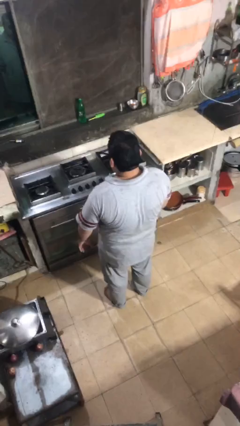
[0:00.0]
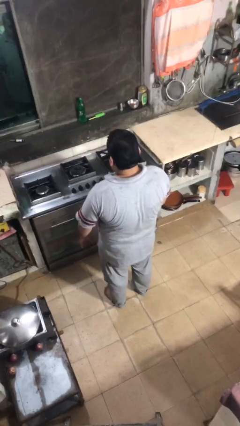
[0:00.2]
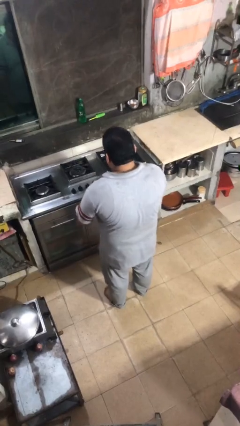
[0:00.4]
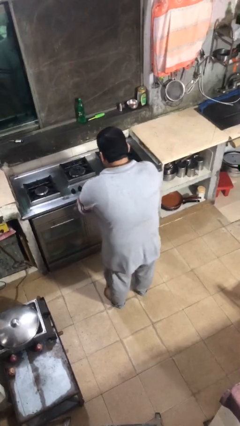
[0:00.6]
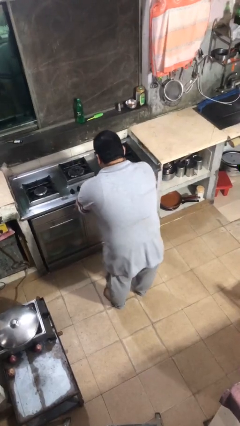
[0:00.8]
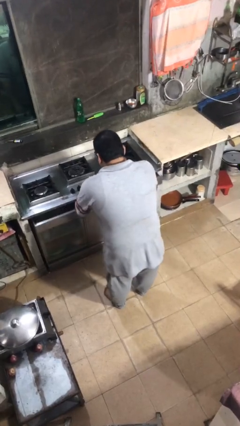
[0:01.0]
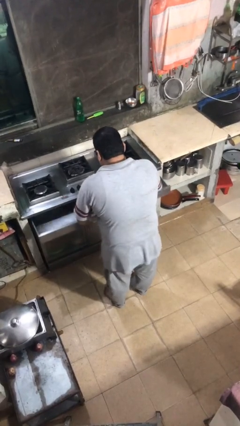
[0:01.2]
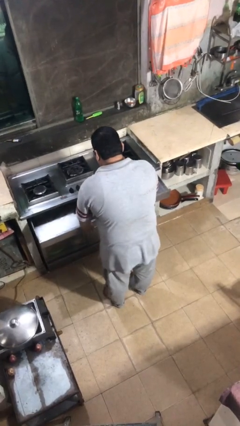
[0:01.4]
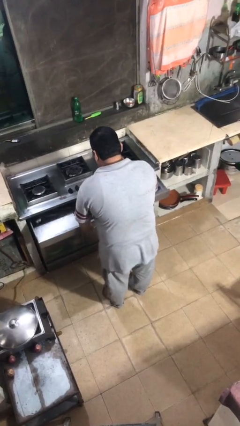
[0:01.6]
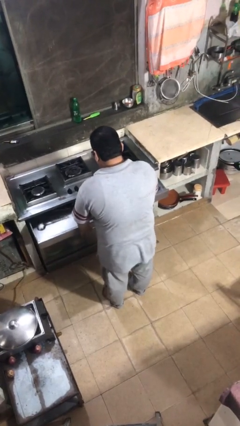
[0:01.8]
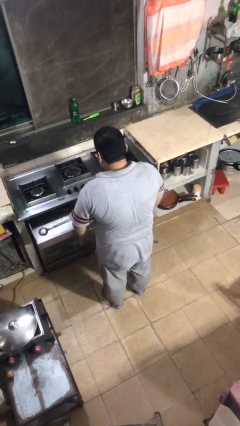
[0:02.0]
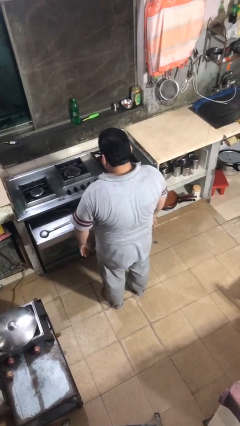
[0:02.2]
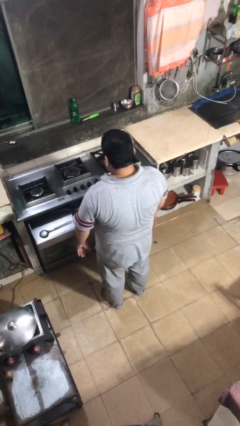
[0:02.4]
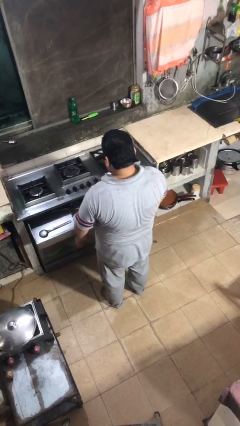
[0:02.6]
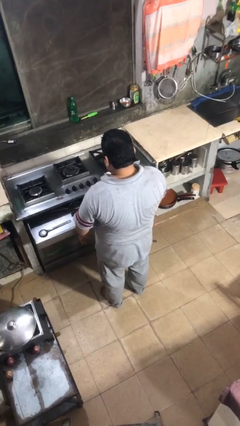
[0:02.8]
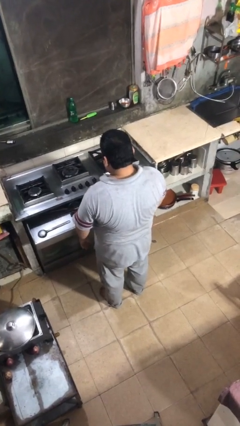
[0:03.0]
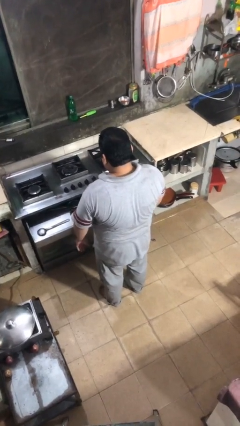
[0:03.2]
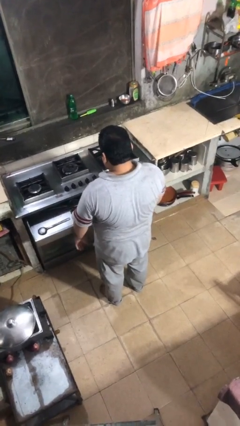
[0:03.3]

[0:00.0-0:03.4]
person opens kitchen drawer

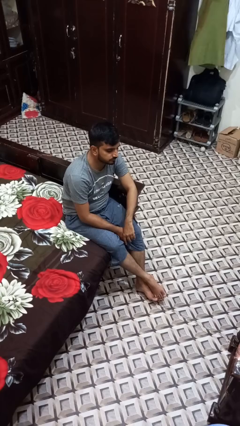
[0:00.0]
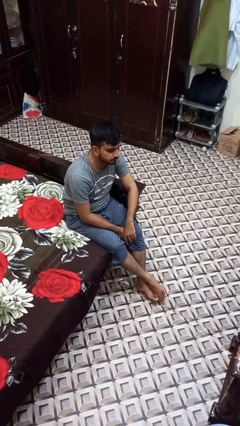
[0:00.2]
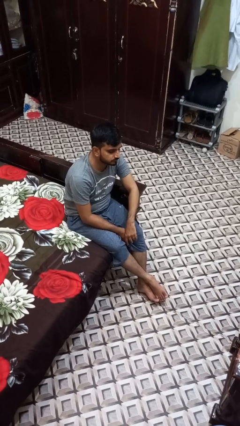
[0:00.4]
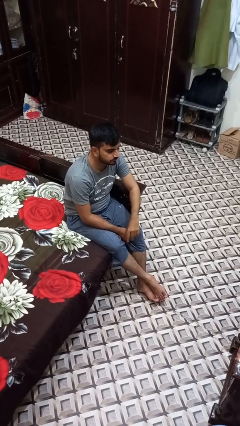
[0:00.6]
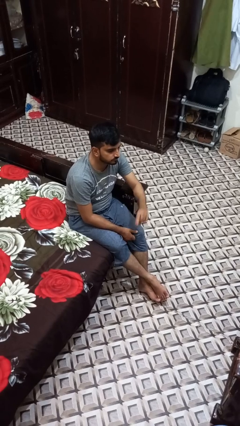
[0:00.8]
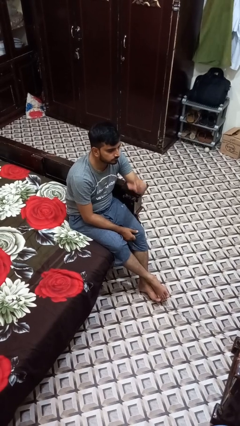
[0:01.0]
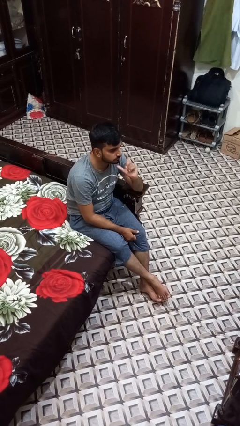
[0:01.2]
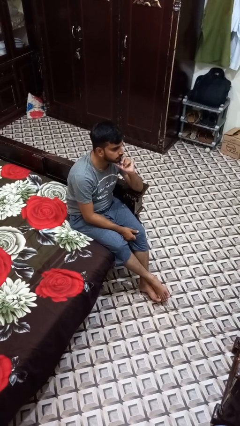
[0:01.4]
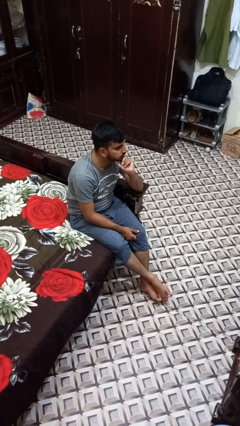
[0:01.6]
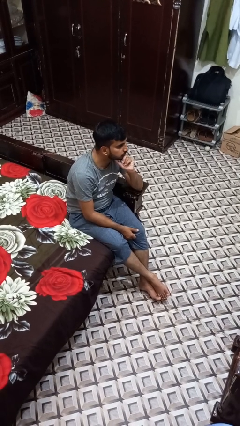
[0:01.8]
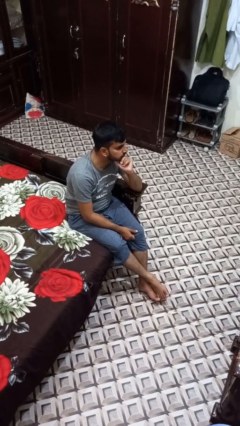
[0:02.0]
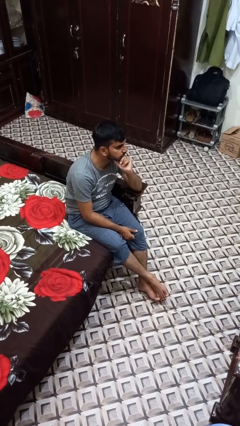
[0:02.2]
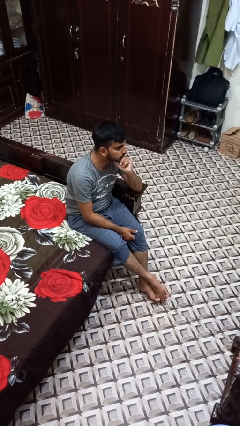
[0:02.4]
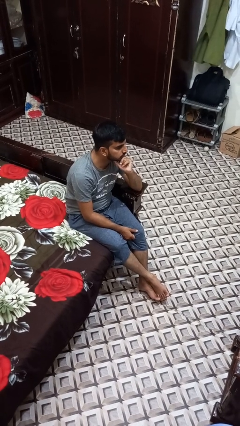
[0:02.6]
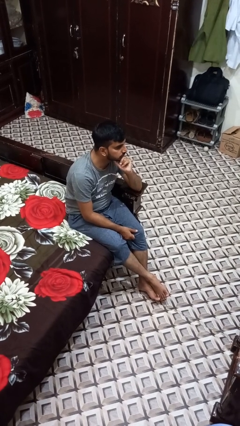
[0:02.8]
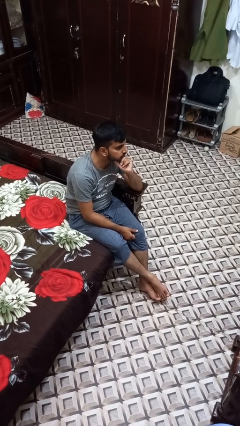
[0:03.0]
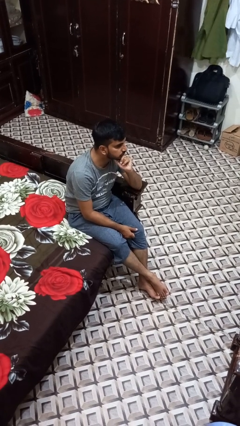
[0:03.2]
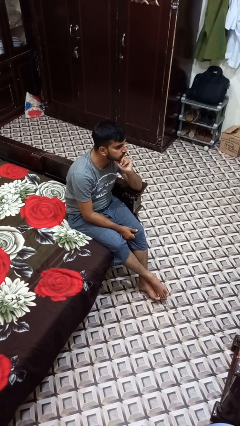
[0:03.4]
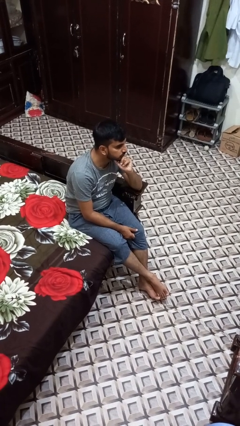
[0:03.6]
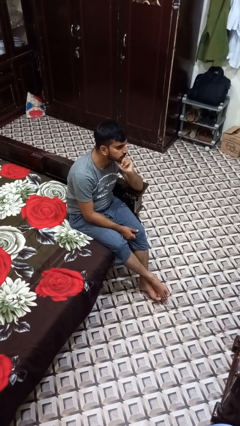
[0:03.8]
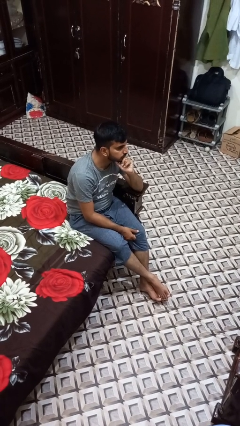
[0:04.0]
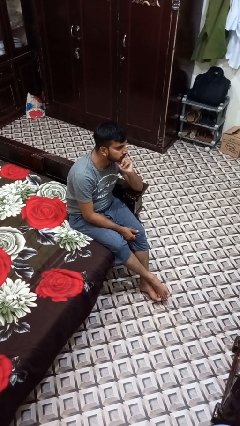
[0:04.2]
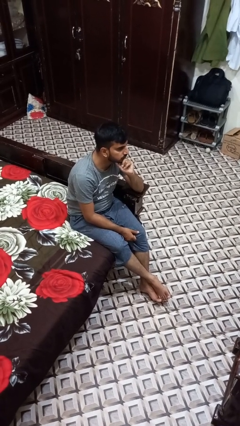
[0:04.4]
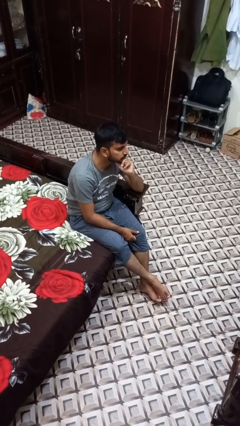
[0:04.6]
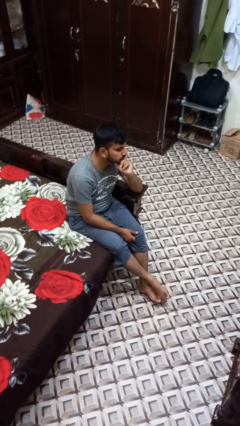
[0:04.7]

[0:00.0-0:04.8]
person strokes chin

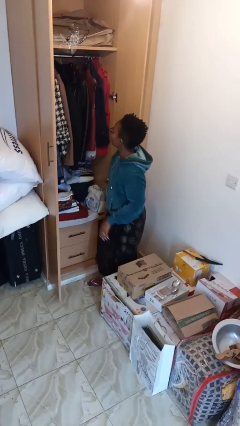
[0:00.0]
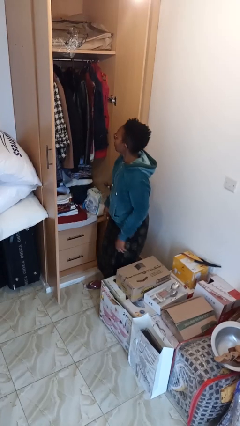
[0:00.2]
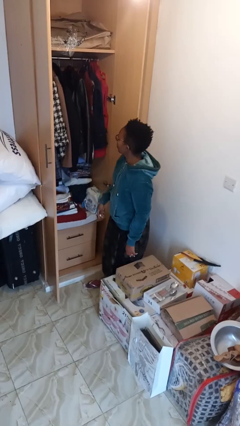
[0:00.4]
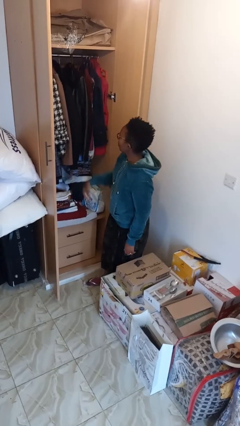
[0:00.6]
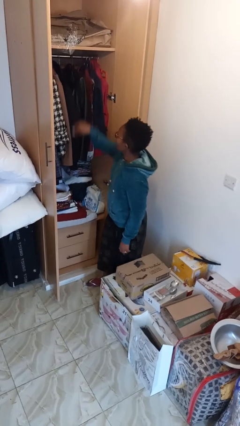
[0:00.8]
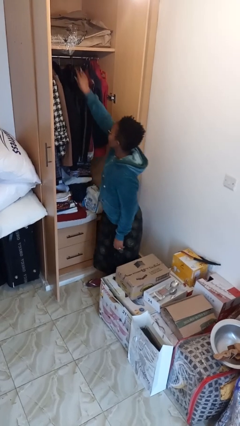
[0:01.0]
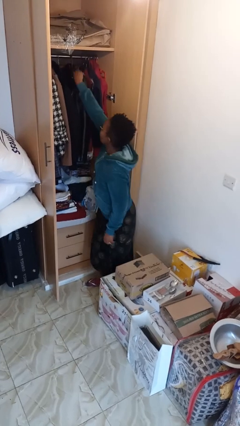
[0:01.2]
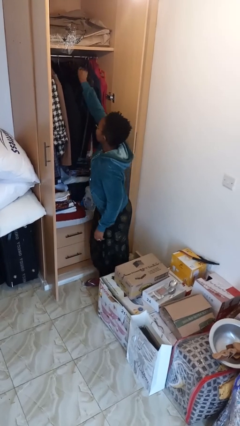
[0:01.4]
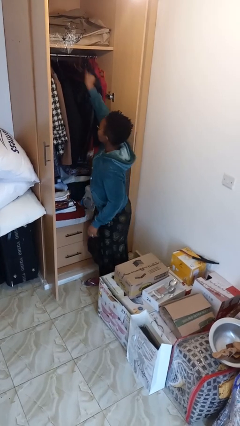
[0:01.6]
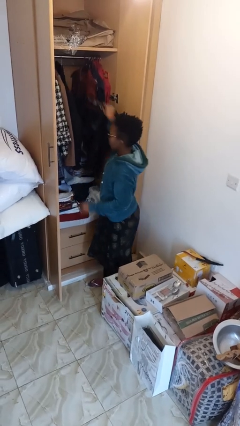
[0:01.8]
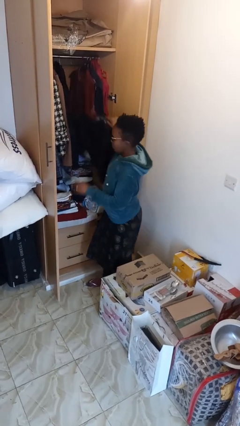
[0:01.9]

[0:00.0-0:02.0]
person takes clothes from closet

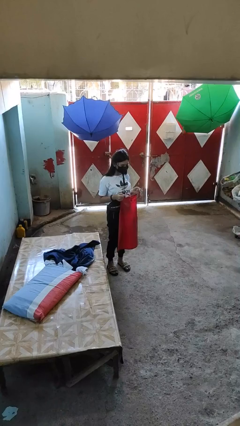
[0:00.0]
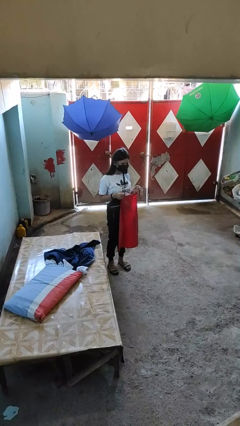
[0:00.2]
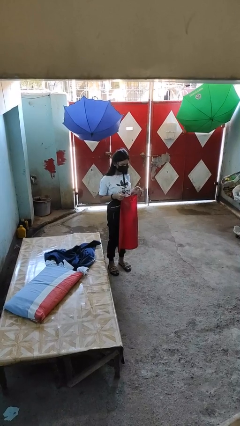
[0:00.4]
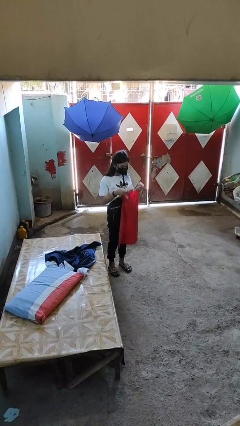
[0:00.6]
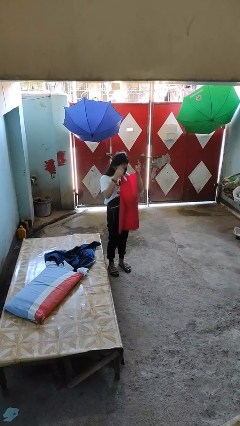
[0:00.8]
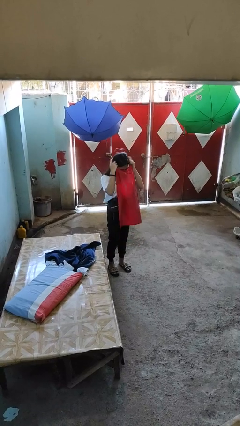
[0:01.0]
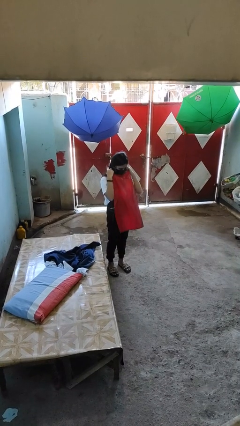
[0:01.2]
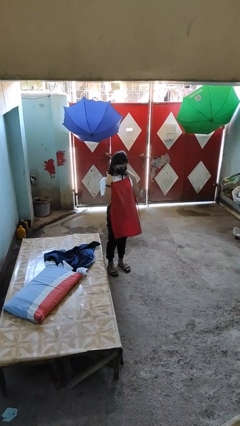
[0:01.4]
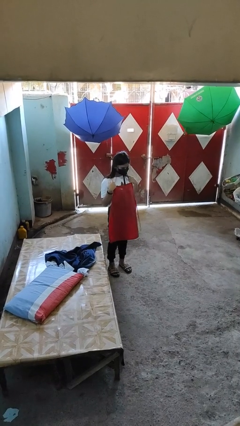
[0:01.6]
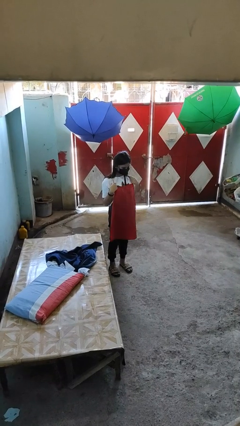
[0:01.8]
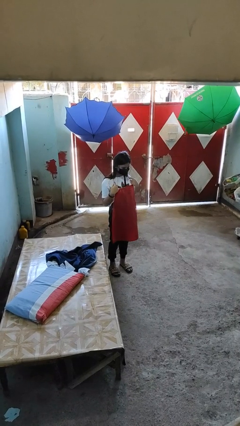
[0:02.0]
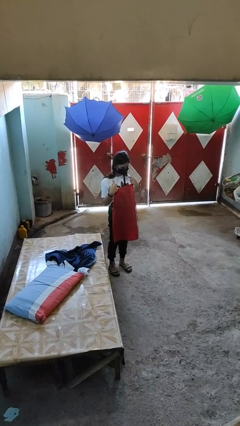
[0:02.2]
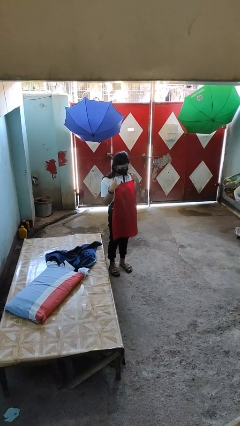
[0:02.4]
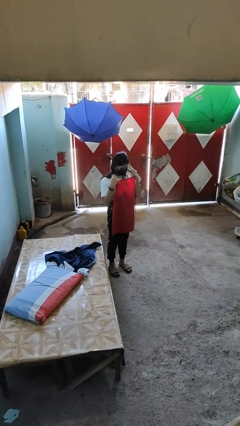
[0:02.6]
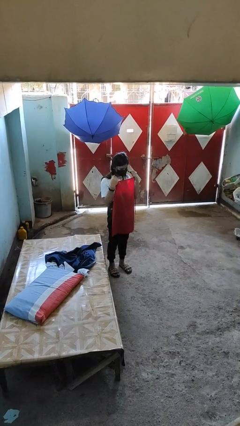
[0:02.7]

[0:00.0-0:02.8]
person puts on apron

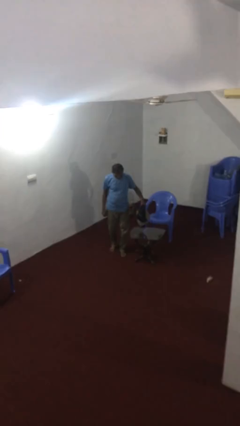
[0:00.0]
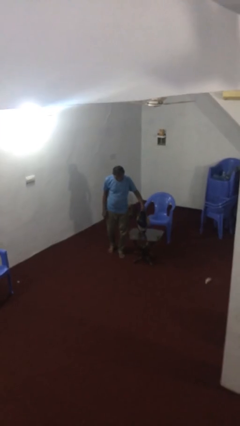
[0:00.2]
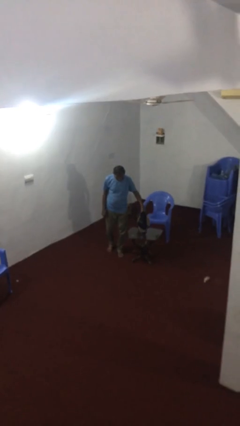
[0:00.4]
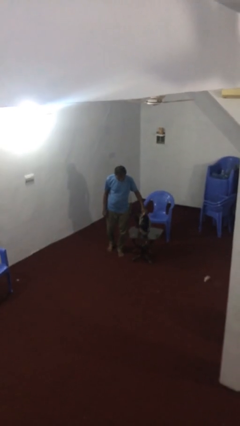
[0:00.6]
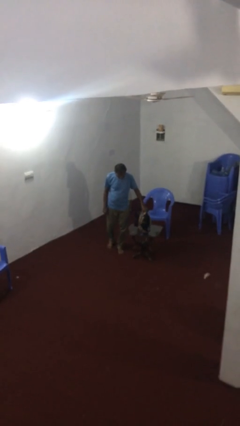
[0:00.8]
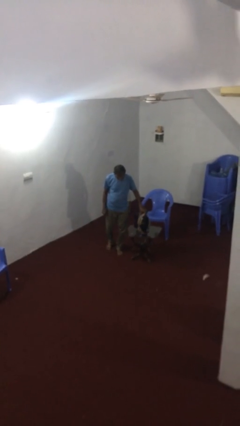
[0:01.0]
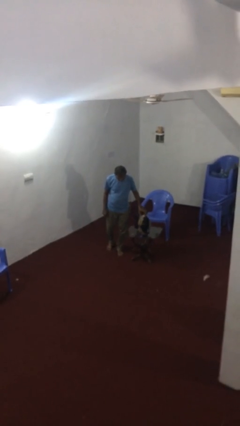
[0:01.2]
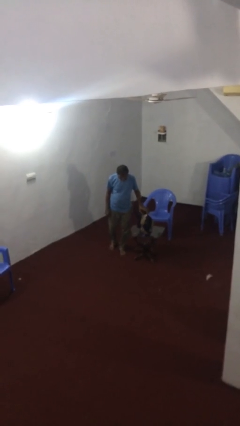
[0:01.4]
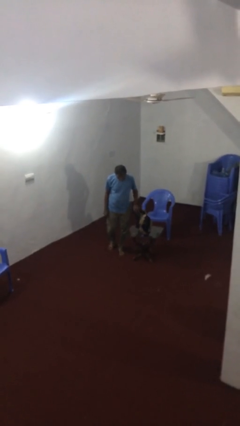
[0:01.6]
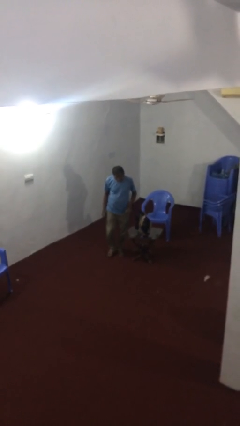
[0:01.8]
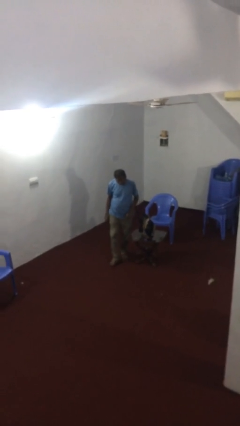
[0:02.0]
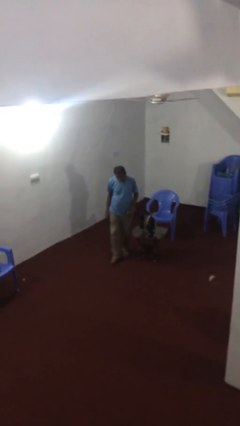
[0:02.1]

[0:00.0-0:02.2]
person puts down object on table

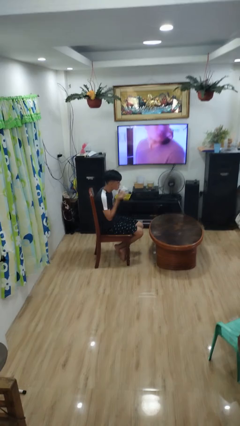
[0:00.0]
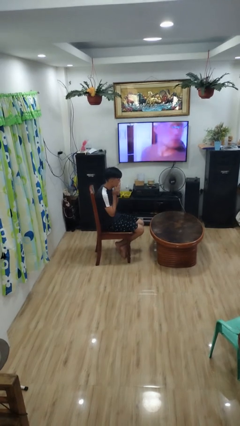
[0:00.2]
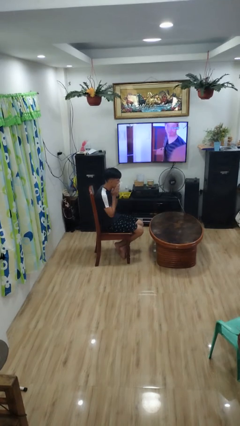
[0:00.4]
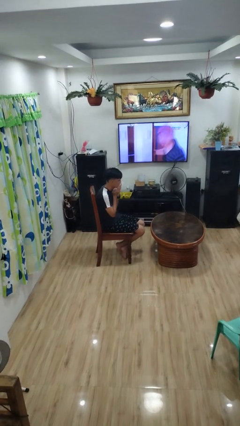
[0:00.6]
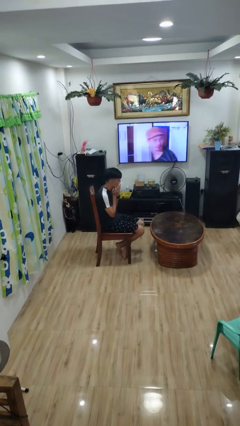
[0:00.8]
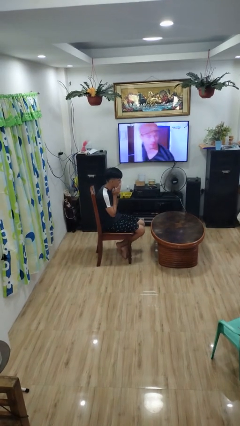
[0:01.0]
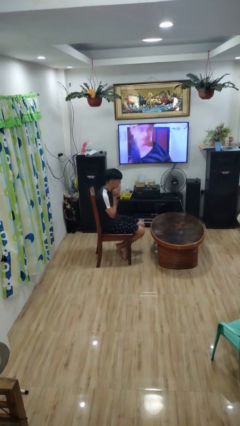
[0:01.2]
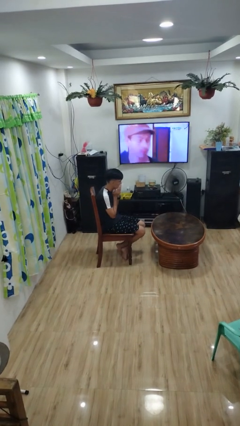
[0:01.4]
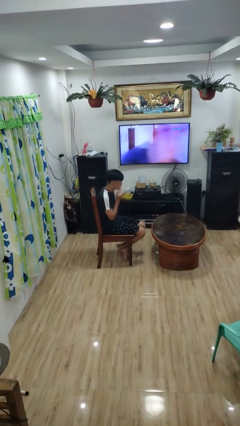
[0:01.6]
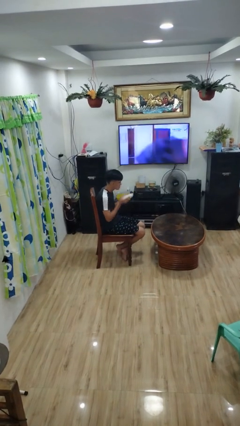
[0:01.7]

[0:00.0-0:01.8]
person wipes mouth with napkin

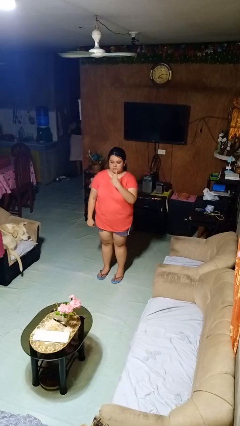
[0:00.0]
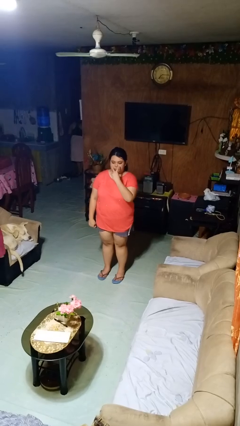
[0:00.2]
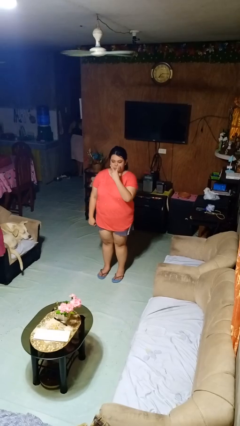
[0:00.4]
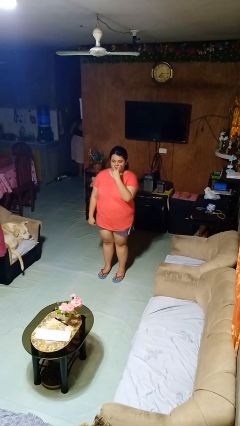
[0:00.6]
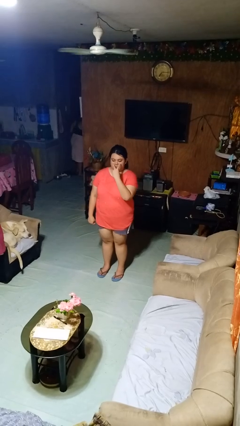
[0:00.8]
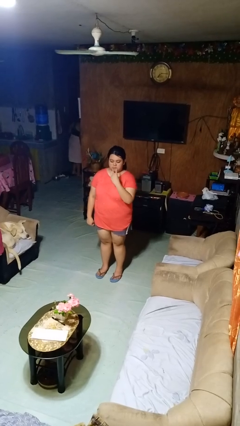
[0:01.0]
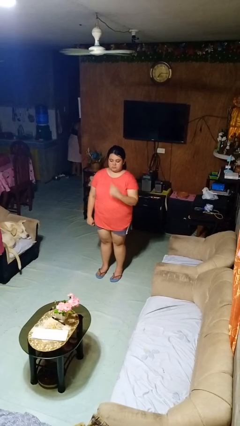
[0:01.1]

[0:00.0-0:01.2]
person gestures watch closely
